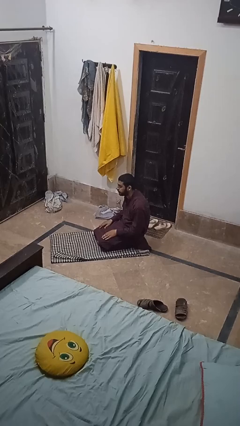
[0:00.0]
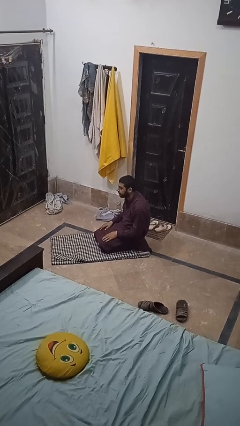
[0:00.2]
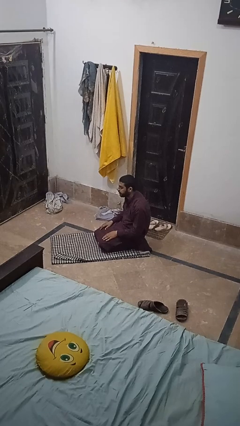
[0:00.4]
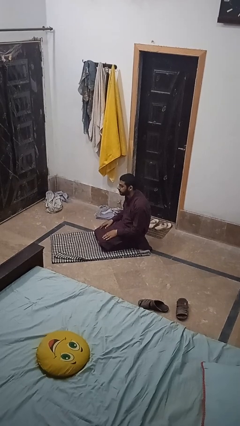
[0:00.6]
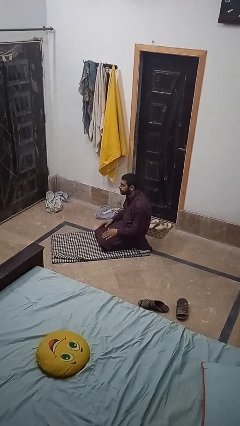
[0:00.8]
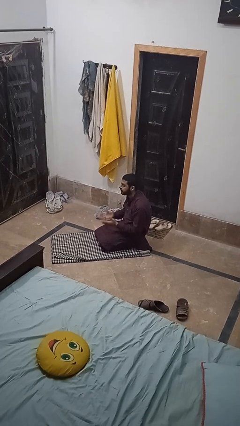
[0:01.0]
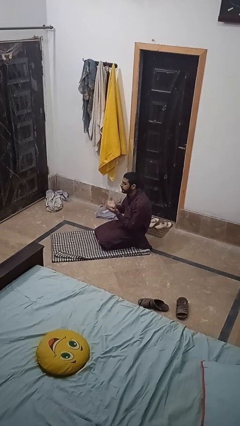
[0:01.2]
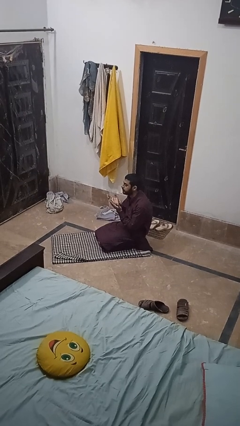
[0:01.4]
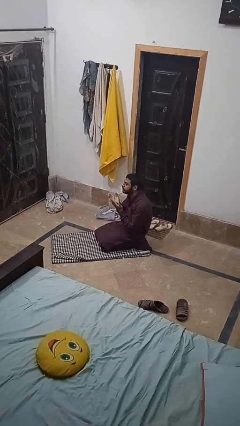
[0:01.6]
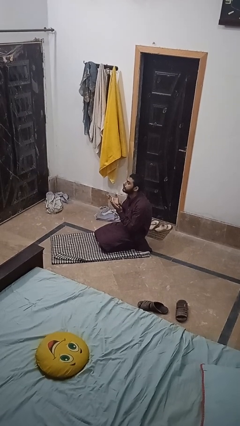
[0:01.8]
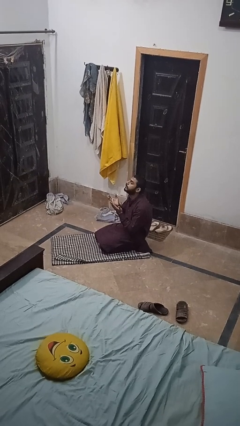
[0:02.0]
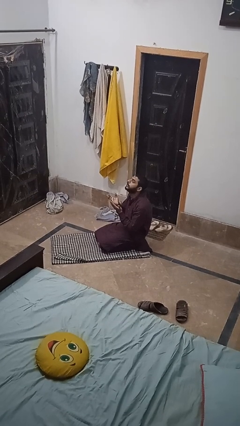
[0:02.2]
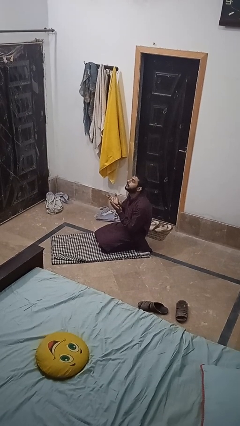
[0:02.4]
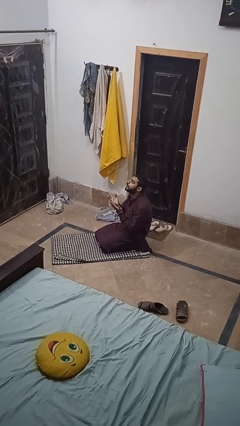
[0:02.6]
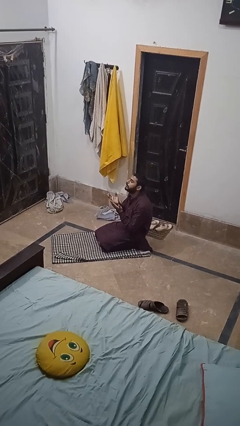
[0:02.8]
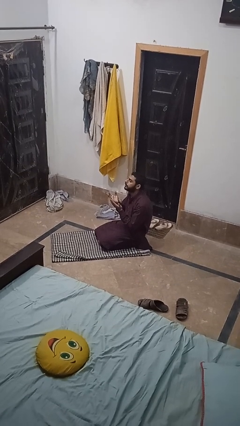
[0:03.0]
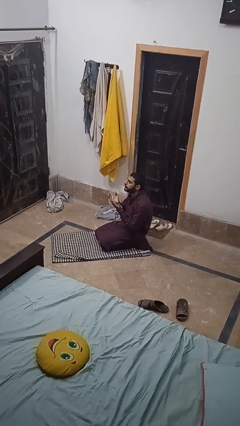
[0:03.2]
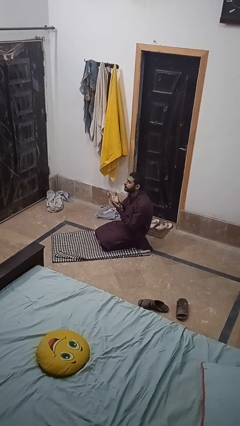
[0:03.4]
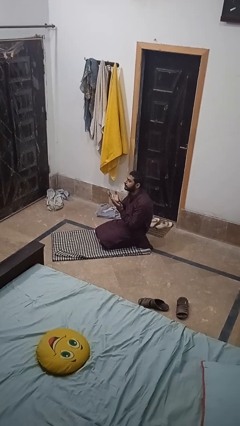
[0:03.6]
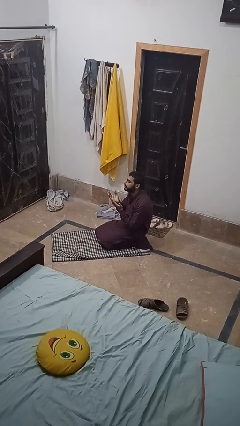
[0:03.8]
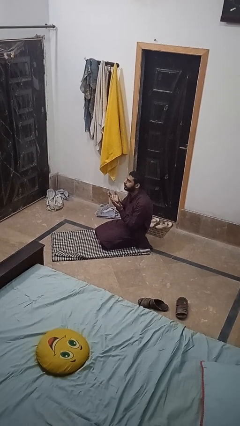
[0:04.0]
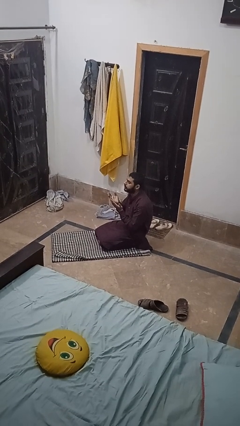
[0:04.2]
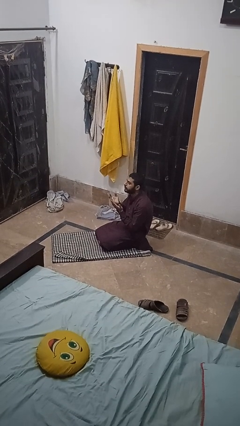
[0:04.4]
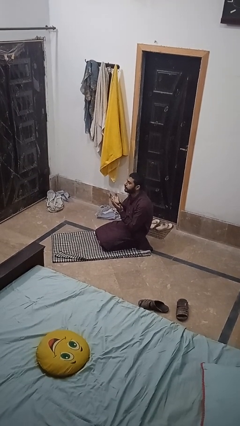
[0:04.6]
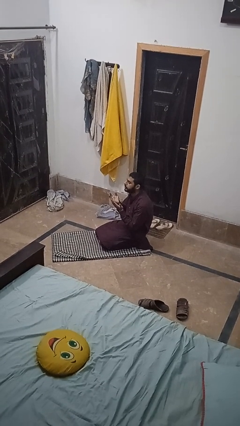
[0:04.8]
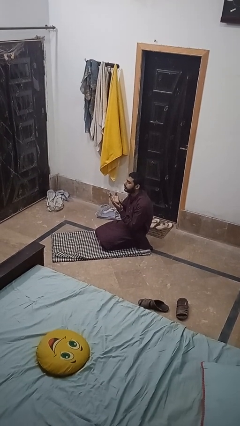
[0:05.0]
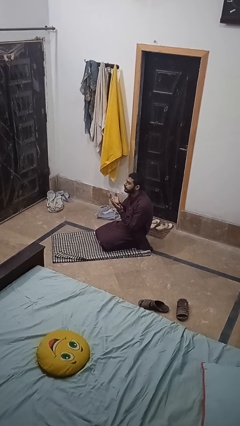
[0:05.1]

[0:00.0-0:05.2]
person prays

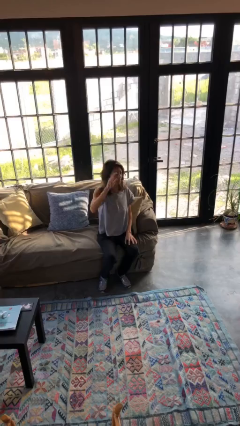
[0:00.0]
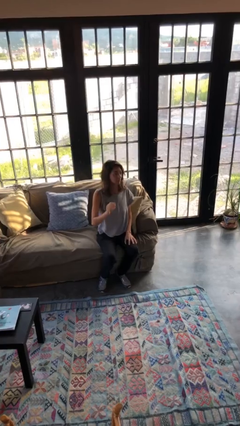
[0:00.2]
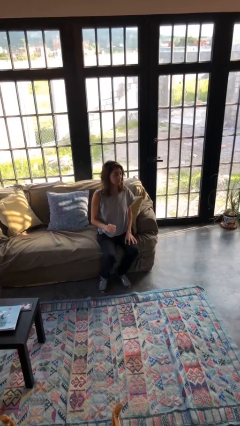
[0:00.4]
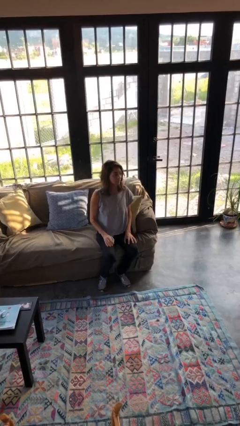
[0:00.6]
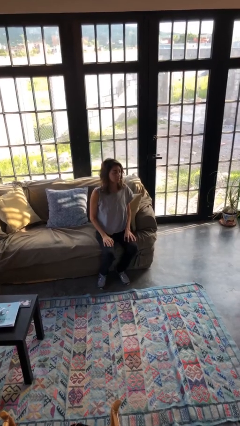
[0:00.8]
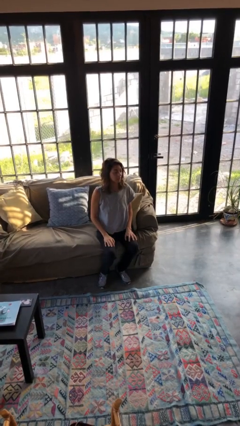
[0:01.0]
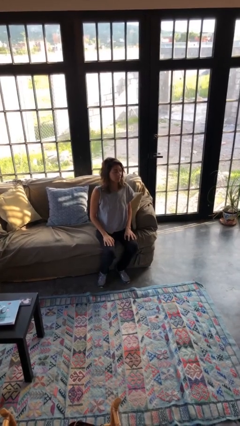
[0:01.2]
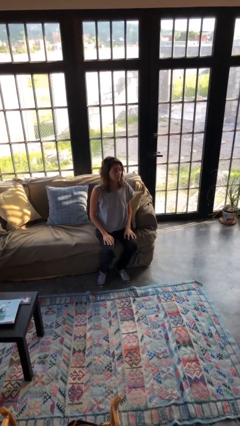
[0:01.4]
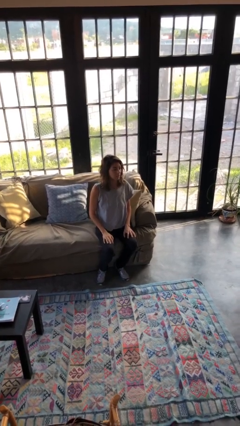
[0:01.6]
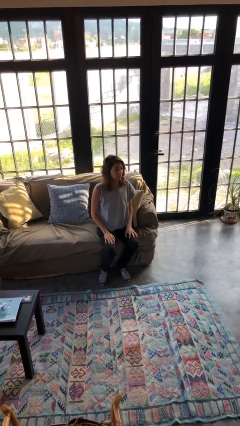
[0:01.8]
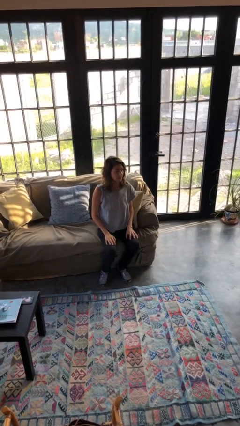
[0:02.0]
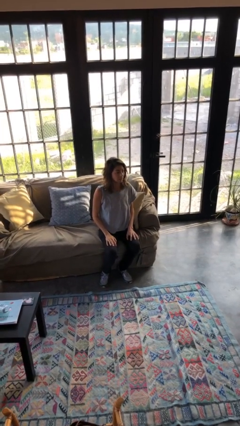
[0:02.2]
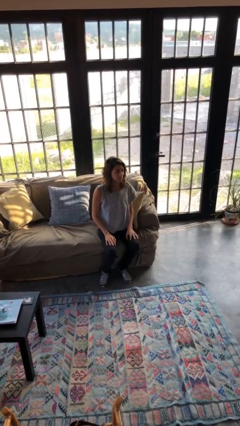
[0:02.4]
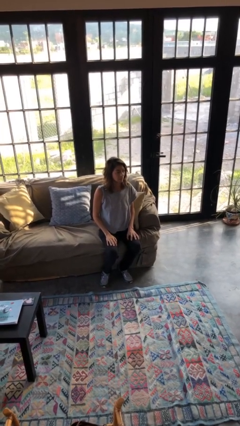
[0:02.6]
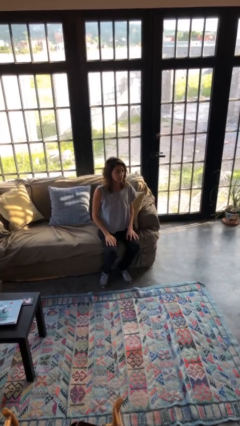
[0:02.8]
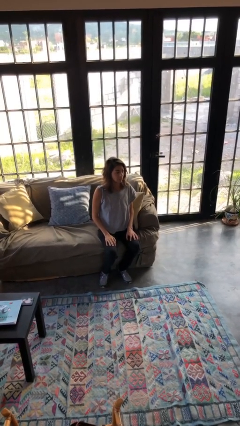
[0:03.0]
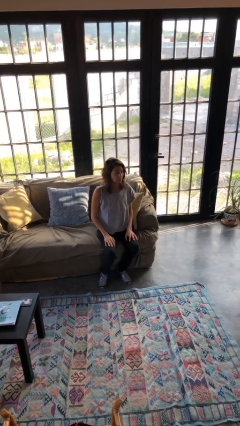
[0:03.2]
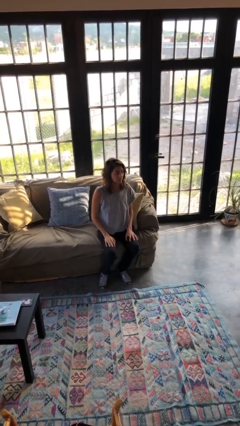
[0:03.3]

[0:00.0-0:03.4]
person gestures lower hand

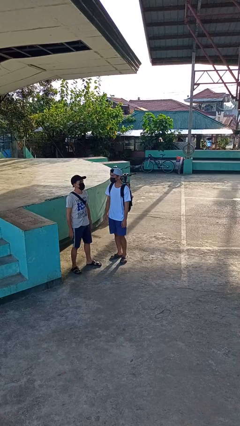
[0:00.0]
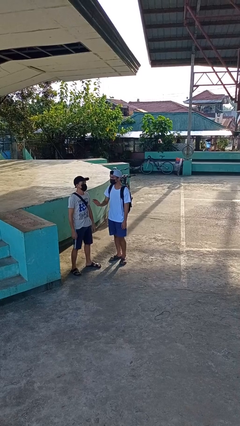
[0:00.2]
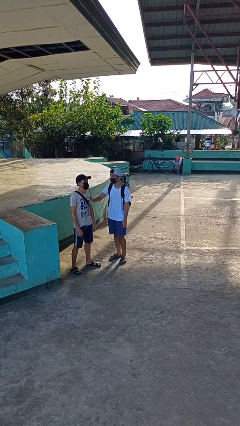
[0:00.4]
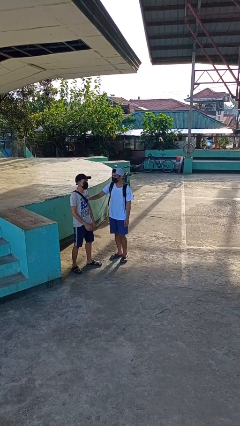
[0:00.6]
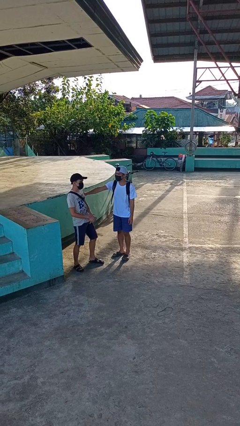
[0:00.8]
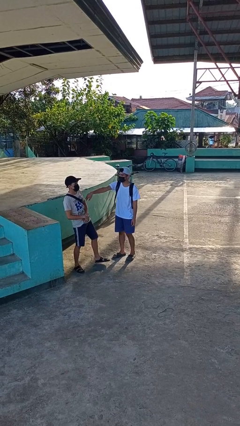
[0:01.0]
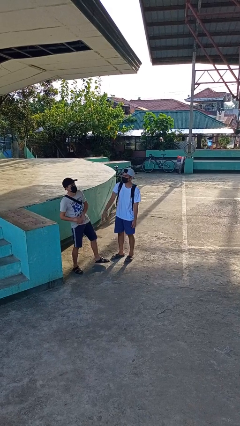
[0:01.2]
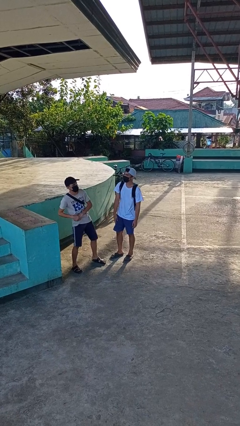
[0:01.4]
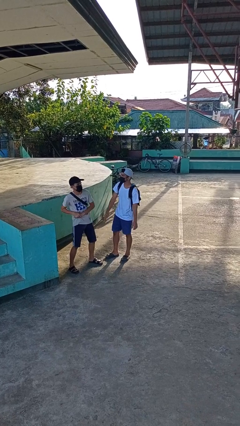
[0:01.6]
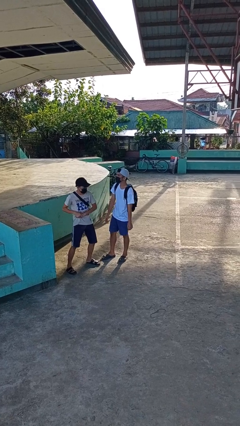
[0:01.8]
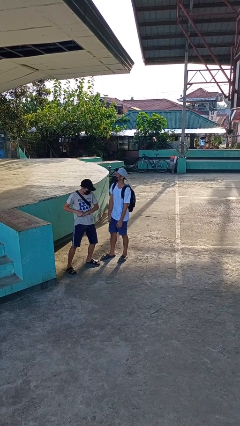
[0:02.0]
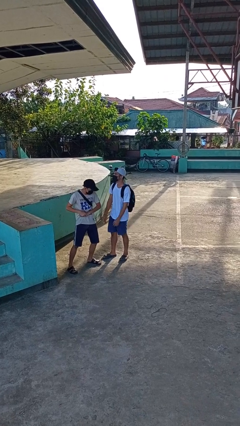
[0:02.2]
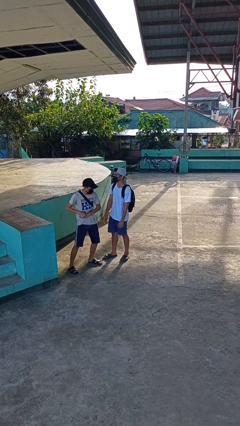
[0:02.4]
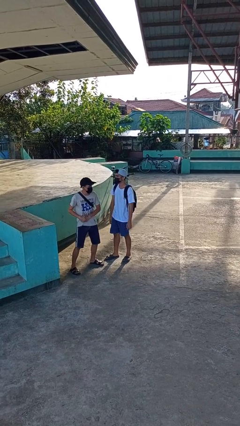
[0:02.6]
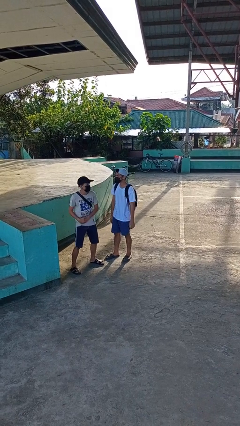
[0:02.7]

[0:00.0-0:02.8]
person shoves person

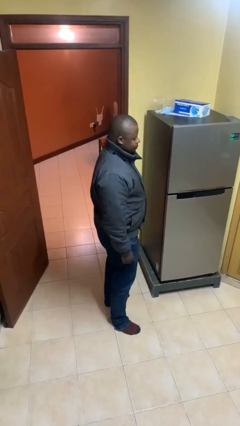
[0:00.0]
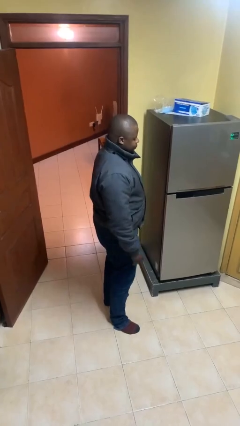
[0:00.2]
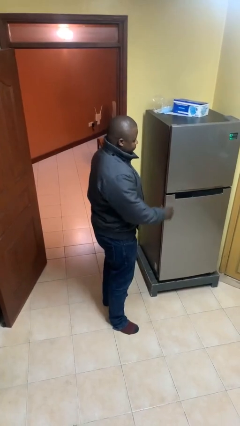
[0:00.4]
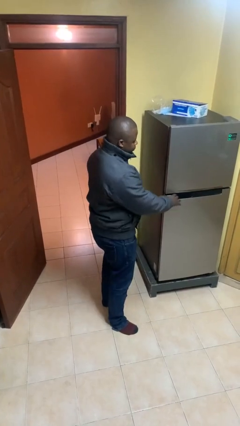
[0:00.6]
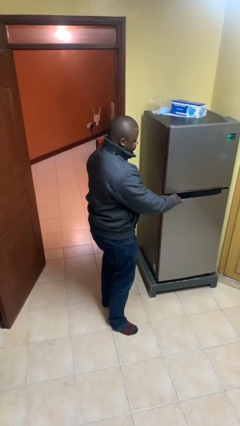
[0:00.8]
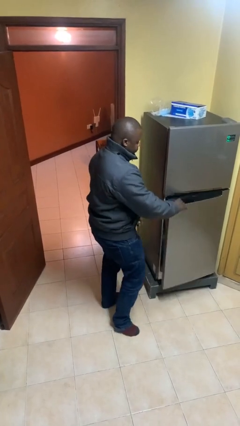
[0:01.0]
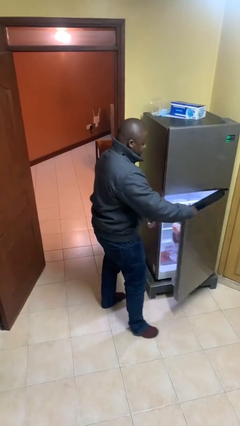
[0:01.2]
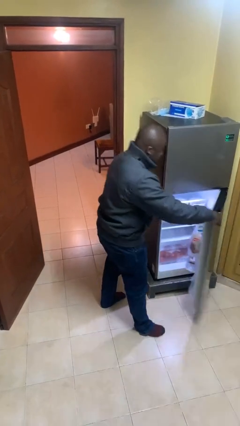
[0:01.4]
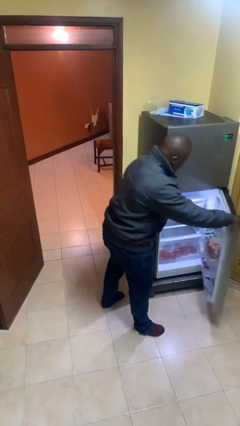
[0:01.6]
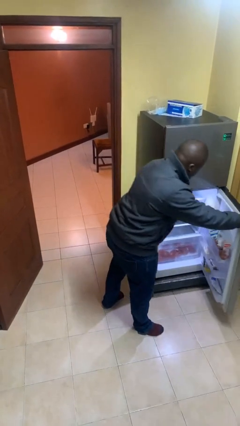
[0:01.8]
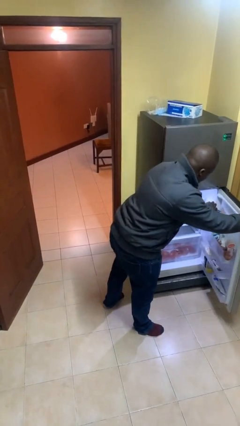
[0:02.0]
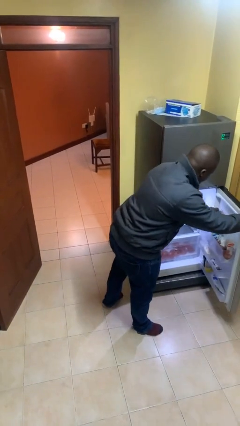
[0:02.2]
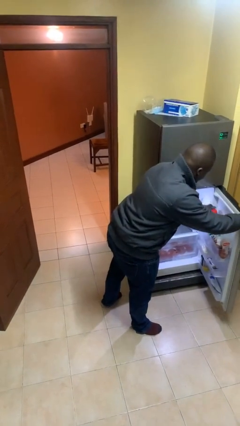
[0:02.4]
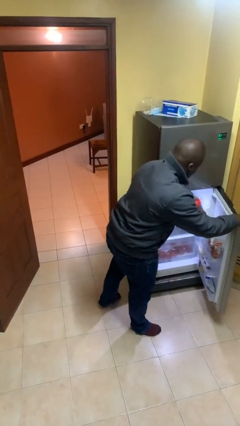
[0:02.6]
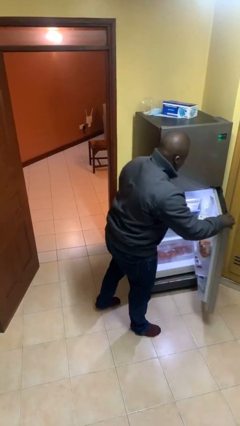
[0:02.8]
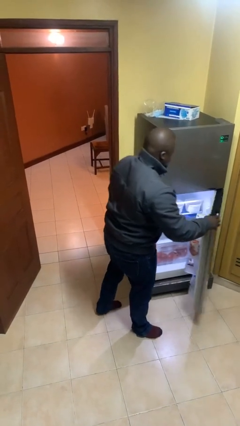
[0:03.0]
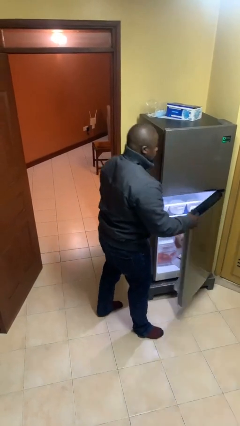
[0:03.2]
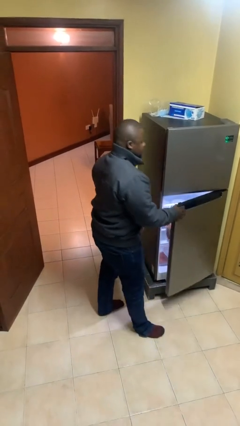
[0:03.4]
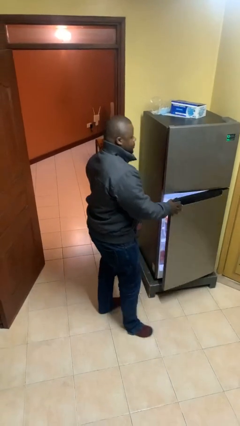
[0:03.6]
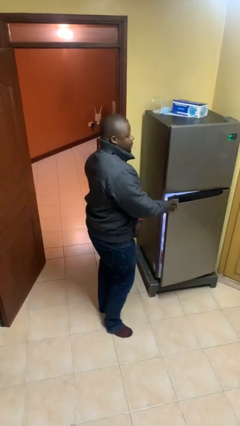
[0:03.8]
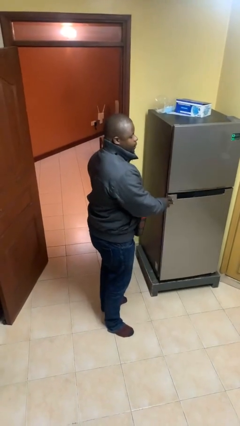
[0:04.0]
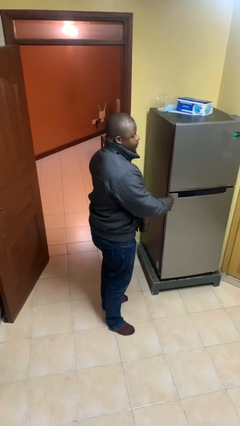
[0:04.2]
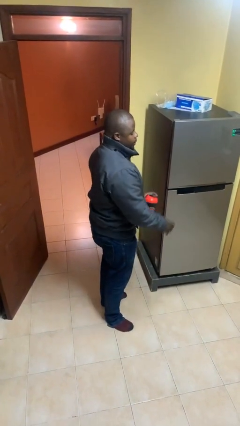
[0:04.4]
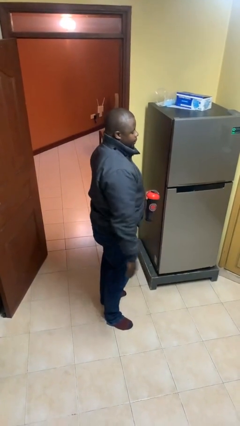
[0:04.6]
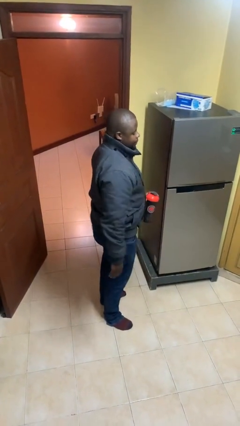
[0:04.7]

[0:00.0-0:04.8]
person takes object from refrigerator

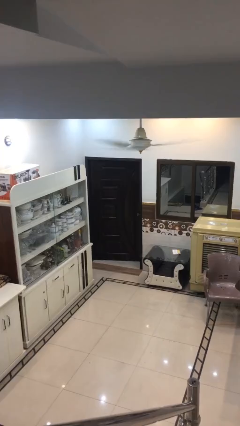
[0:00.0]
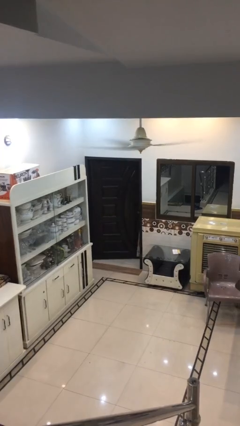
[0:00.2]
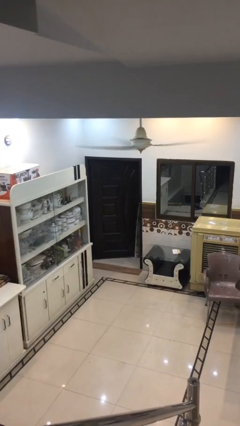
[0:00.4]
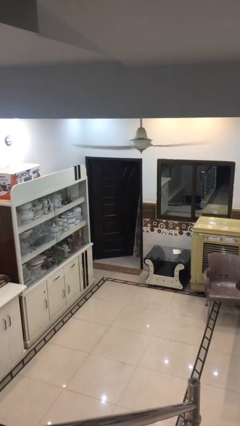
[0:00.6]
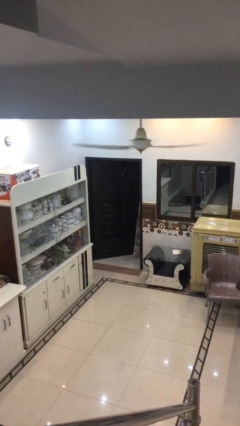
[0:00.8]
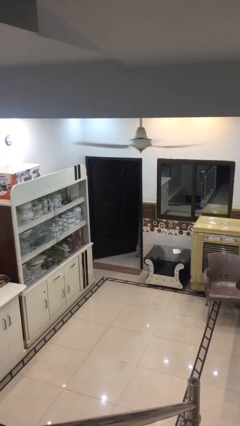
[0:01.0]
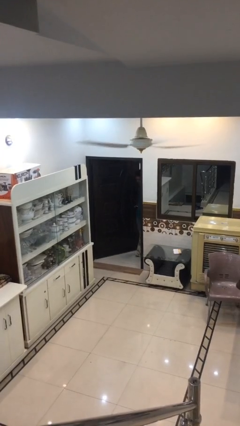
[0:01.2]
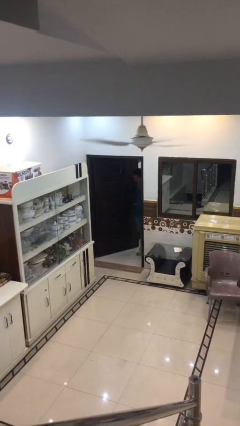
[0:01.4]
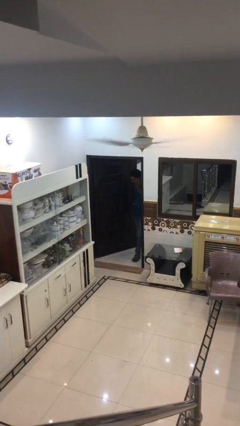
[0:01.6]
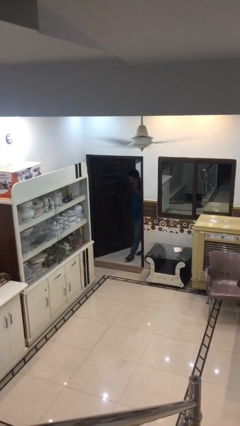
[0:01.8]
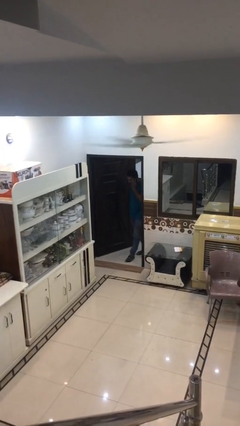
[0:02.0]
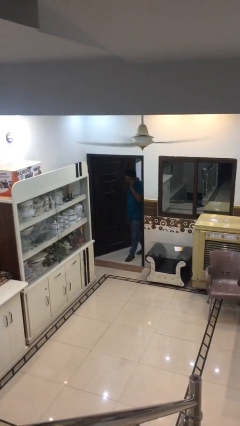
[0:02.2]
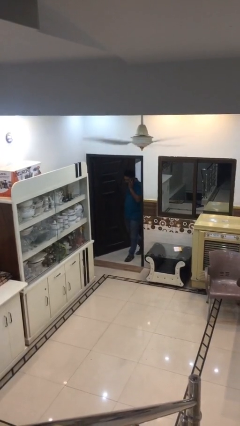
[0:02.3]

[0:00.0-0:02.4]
person opens facility door
